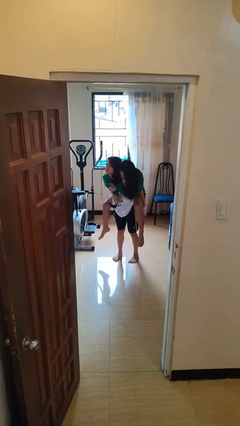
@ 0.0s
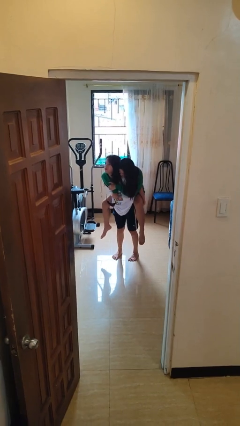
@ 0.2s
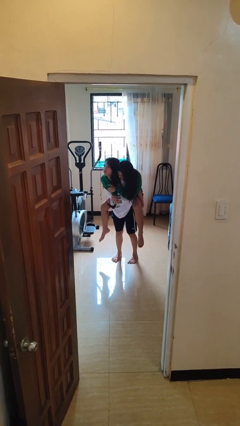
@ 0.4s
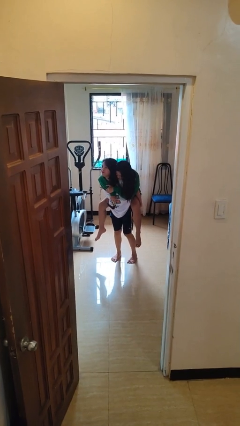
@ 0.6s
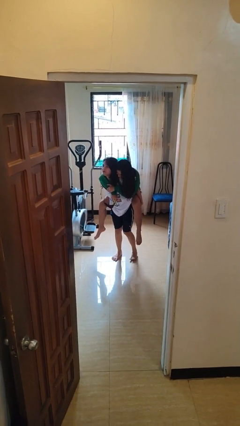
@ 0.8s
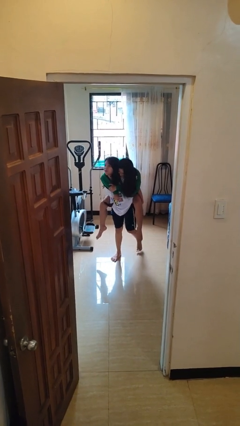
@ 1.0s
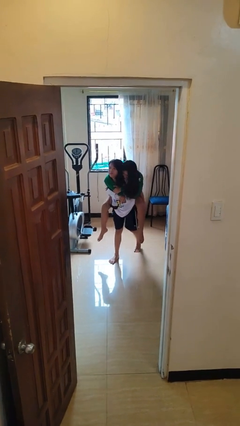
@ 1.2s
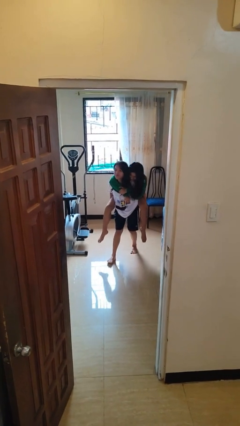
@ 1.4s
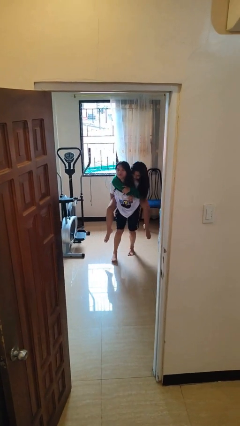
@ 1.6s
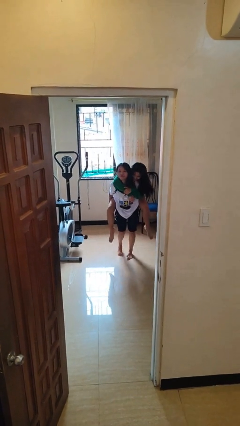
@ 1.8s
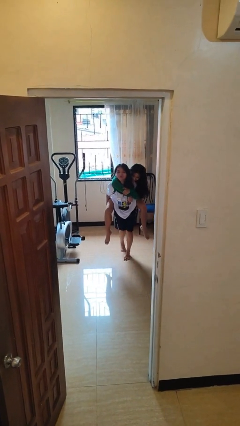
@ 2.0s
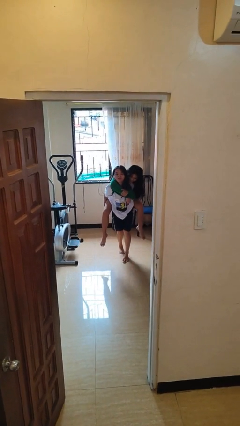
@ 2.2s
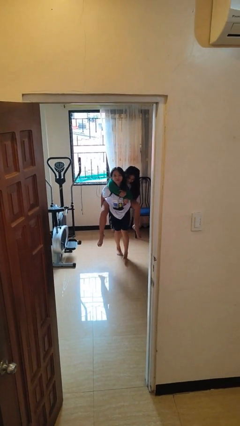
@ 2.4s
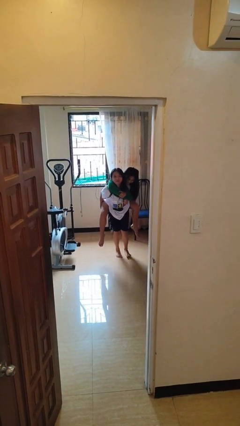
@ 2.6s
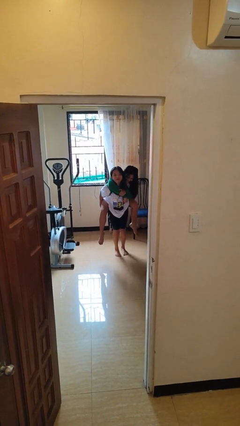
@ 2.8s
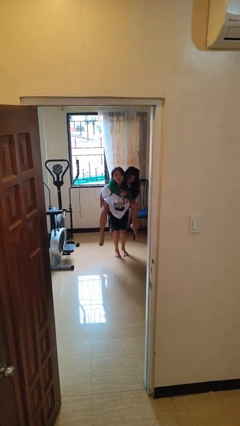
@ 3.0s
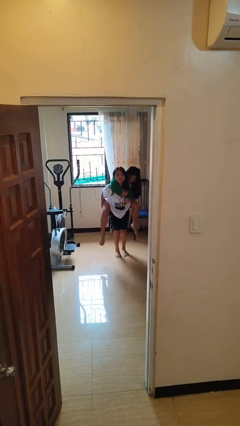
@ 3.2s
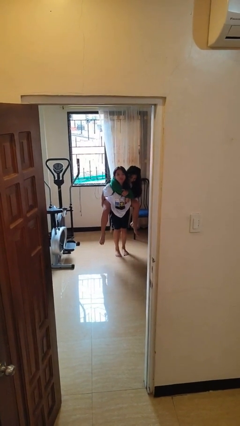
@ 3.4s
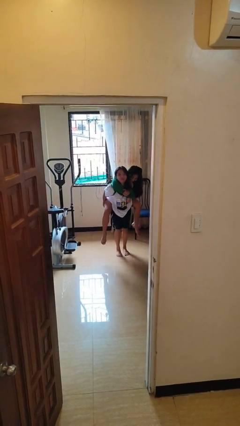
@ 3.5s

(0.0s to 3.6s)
person carries person on back

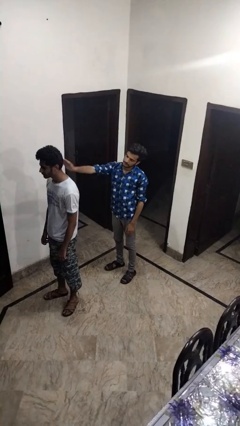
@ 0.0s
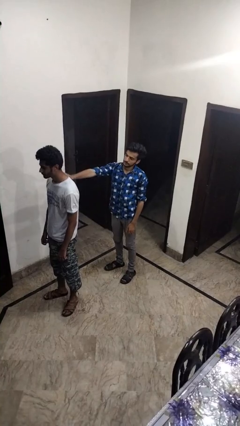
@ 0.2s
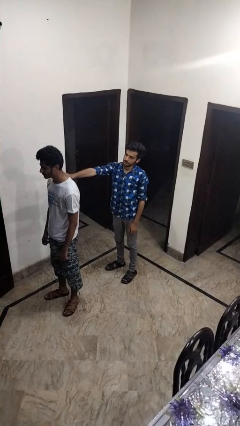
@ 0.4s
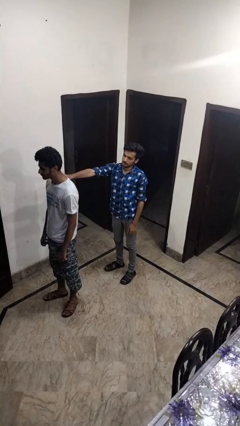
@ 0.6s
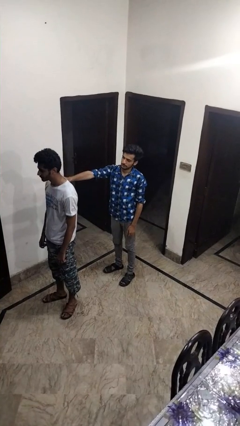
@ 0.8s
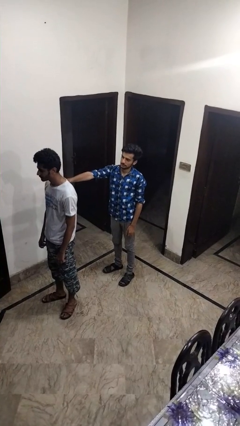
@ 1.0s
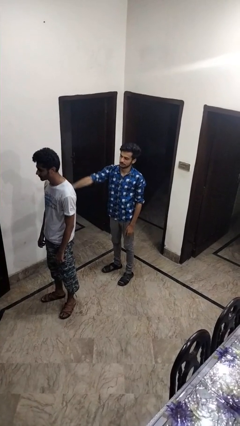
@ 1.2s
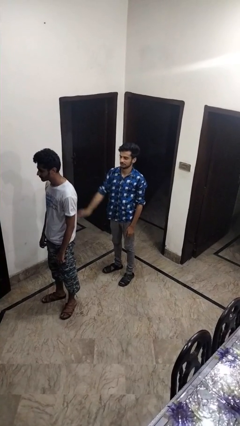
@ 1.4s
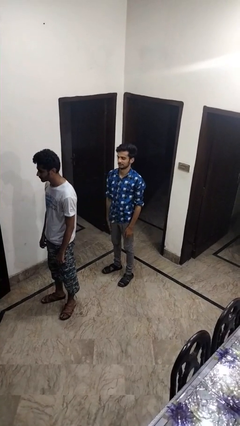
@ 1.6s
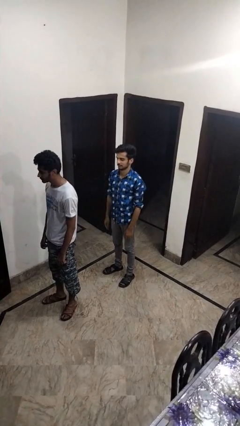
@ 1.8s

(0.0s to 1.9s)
person touches back of person

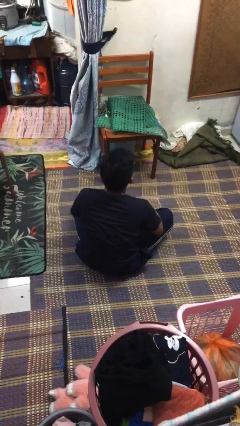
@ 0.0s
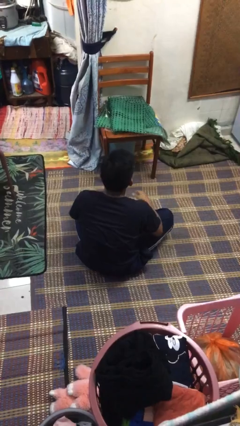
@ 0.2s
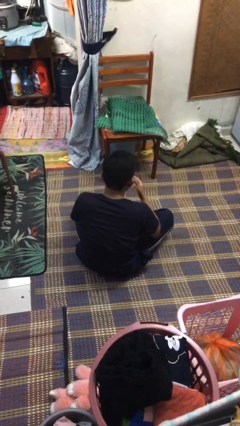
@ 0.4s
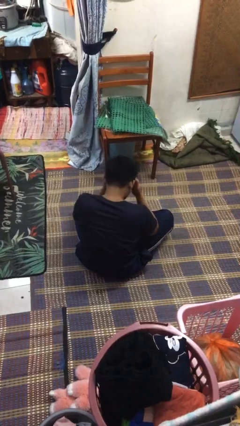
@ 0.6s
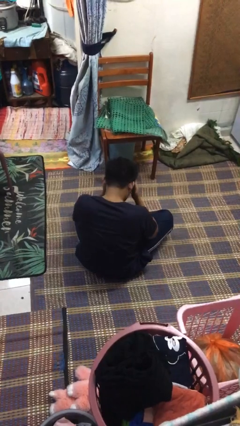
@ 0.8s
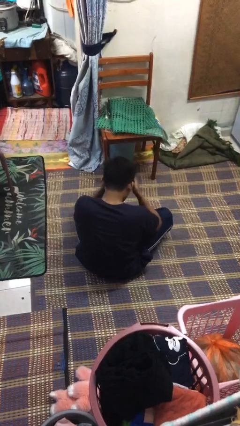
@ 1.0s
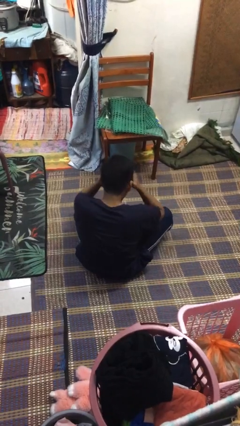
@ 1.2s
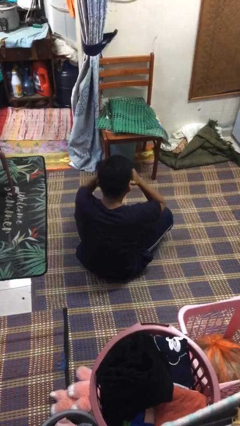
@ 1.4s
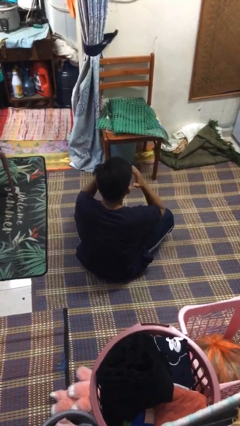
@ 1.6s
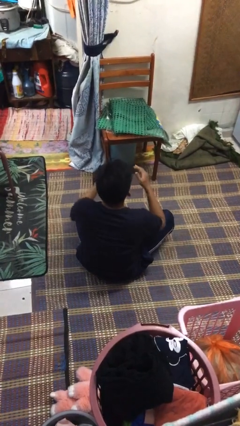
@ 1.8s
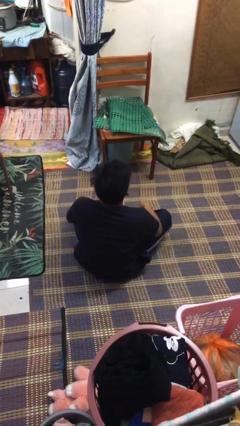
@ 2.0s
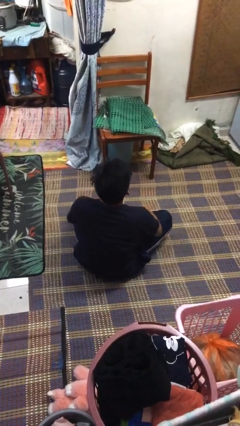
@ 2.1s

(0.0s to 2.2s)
person covers face with hands

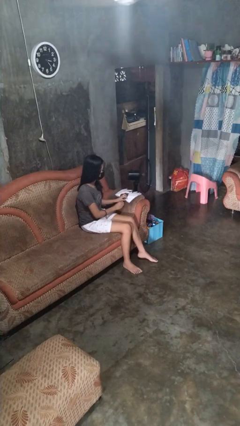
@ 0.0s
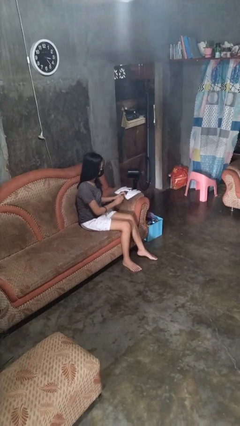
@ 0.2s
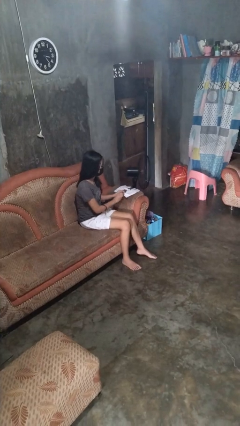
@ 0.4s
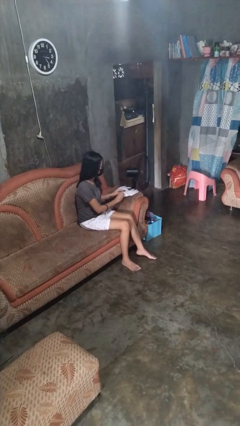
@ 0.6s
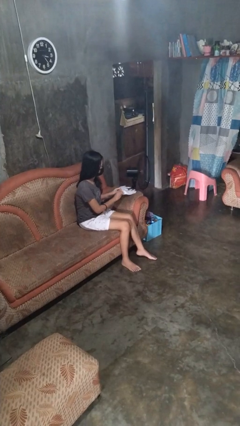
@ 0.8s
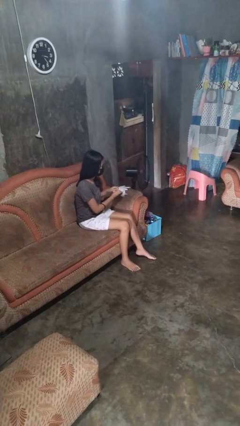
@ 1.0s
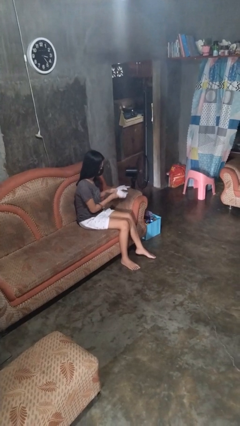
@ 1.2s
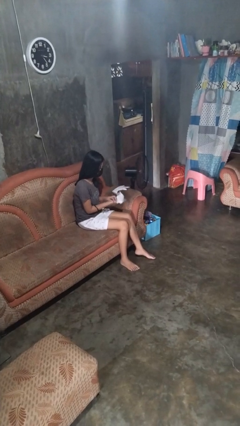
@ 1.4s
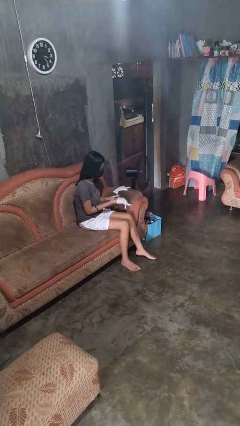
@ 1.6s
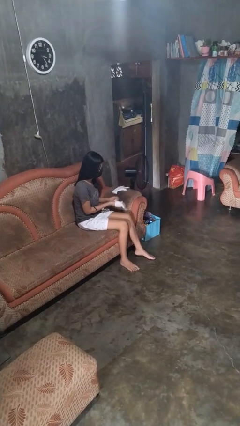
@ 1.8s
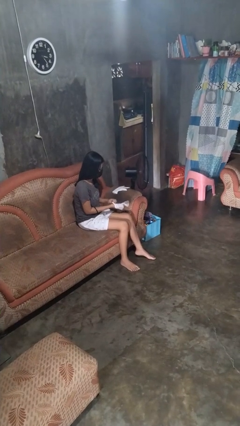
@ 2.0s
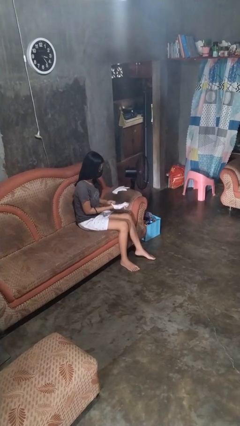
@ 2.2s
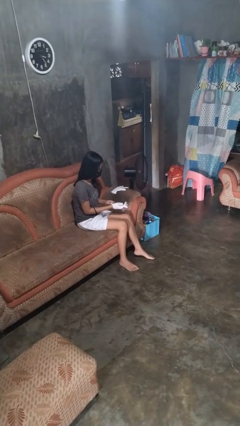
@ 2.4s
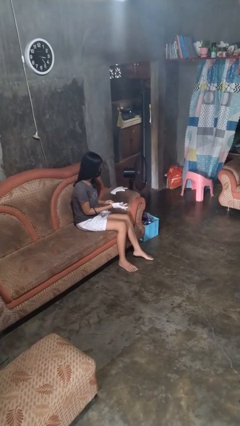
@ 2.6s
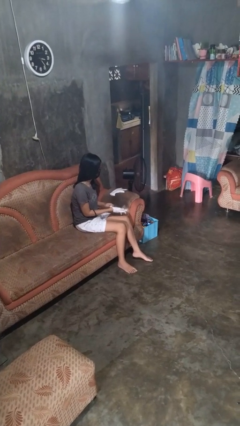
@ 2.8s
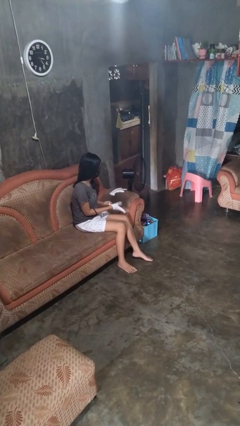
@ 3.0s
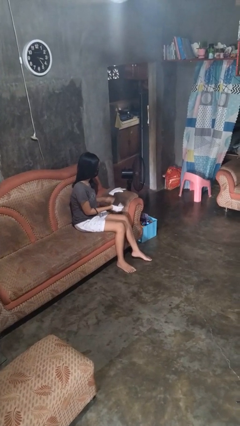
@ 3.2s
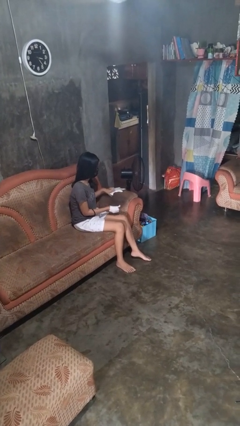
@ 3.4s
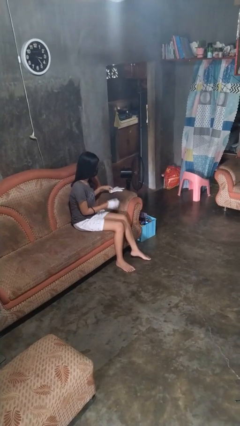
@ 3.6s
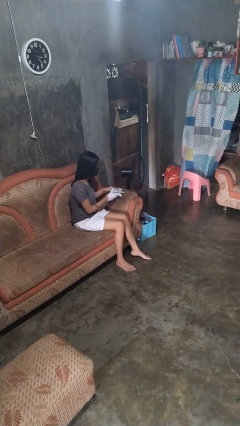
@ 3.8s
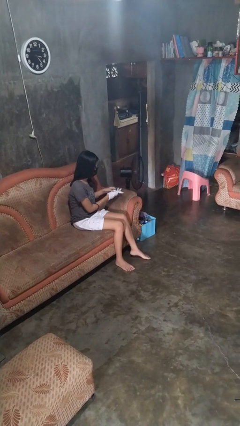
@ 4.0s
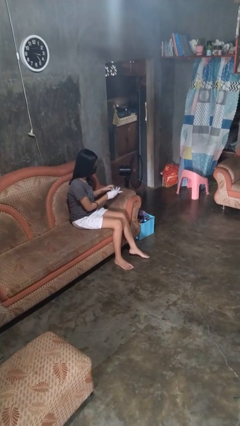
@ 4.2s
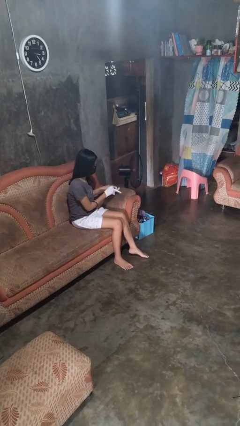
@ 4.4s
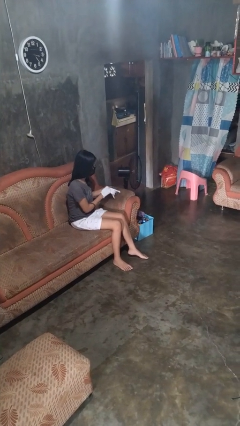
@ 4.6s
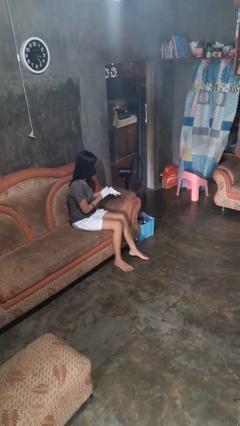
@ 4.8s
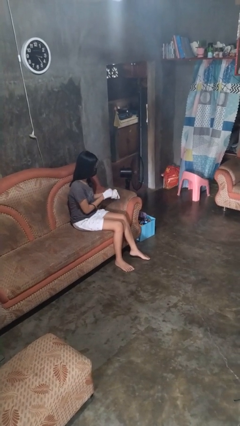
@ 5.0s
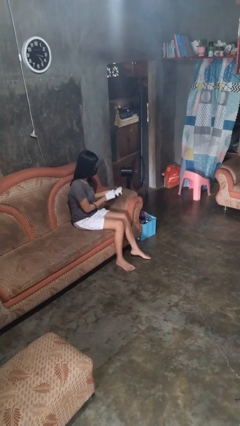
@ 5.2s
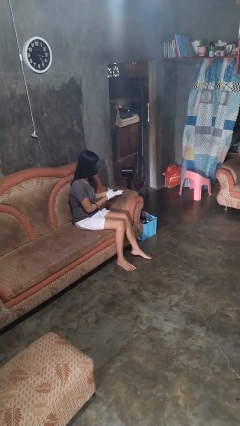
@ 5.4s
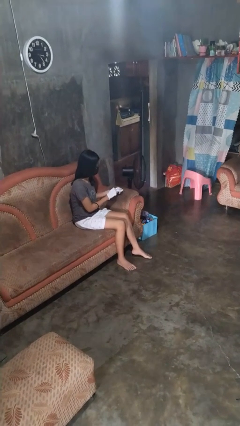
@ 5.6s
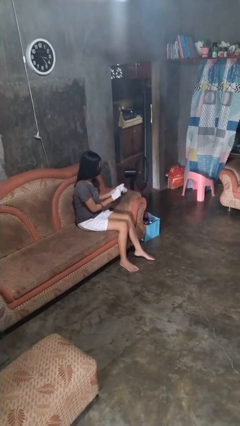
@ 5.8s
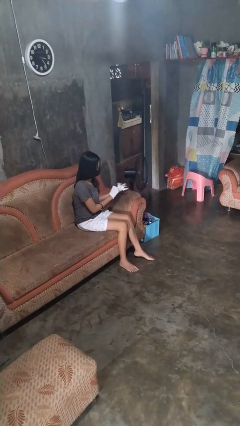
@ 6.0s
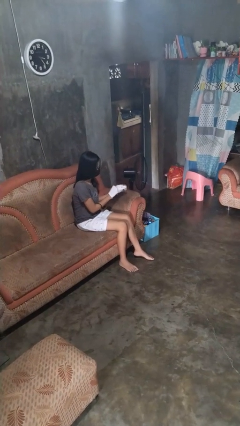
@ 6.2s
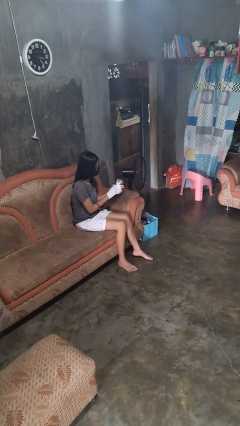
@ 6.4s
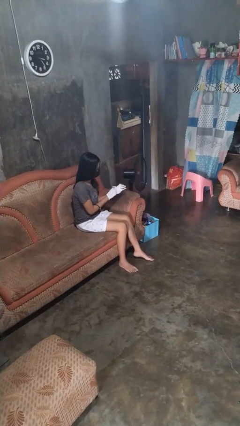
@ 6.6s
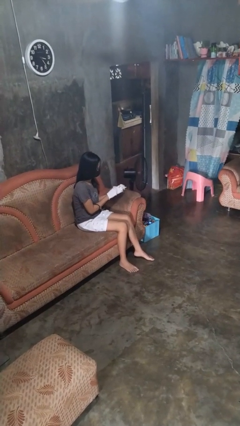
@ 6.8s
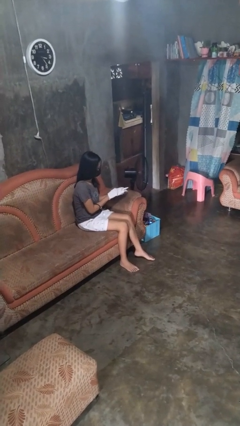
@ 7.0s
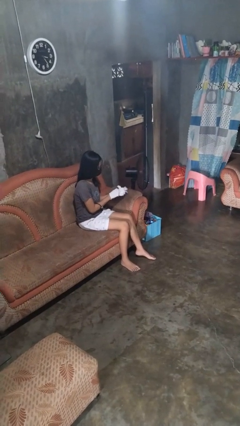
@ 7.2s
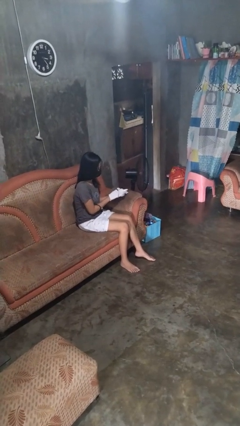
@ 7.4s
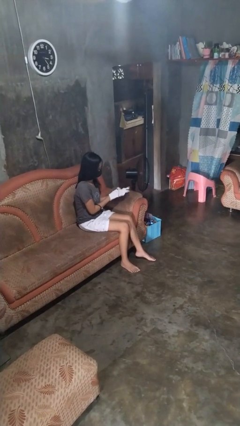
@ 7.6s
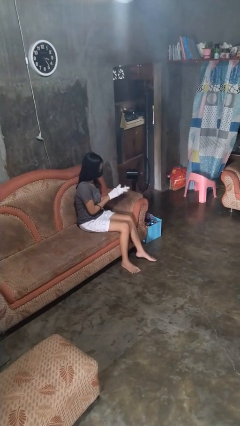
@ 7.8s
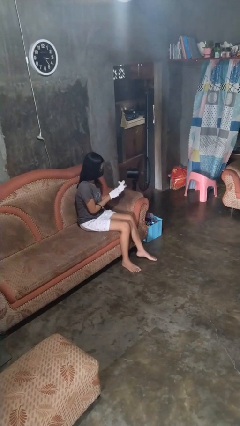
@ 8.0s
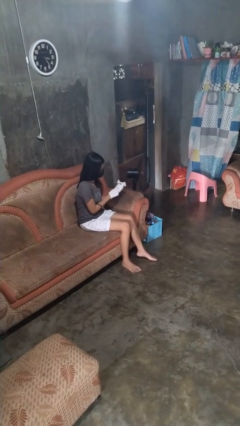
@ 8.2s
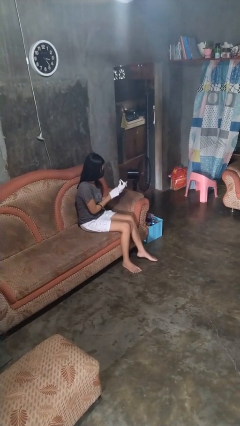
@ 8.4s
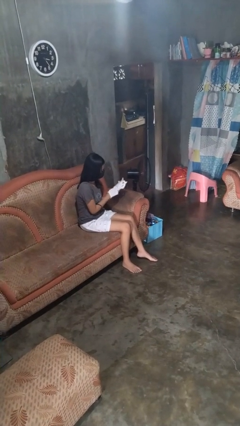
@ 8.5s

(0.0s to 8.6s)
person puts on gloves

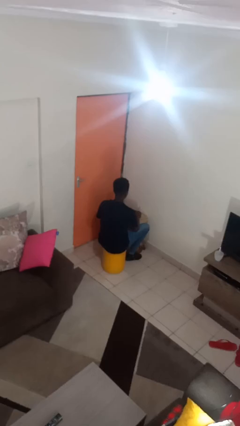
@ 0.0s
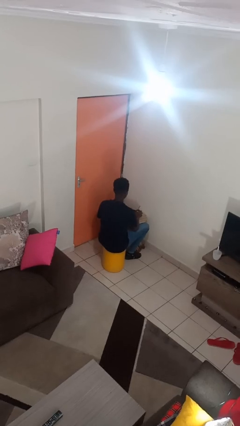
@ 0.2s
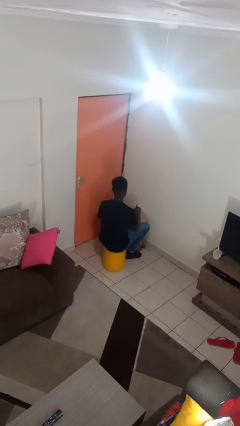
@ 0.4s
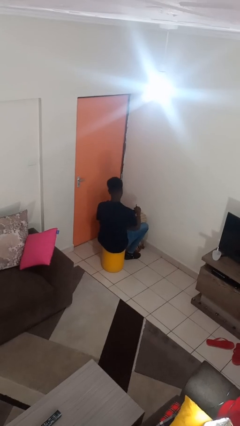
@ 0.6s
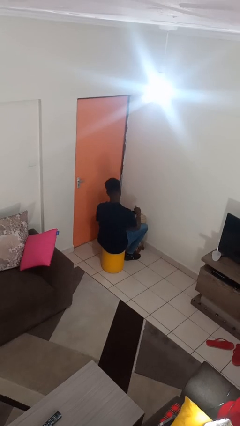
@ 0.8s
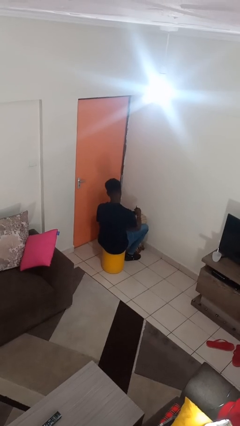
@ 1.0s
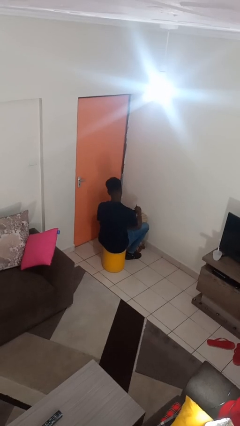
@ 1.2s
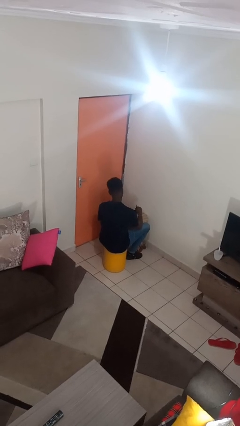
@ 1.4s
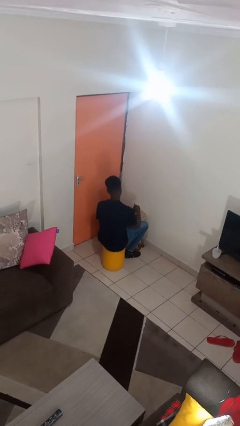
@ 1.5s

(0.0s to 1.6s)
person stirs mug
